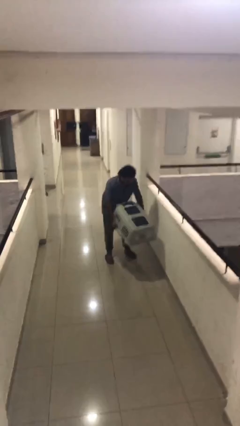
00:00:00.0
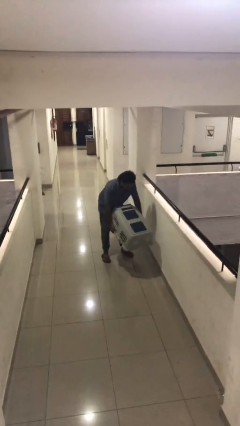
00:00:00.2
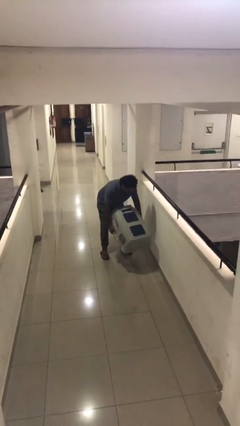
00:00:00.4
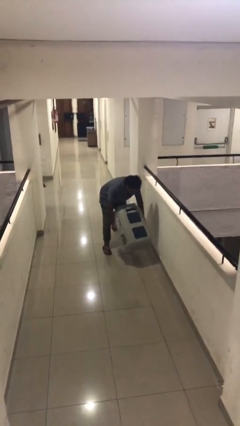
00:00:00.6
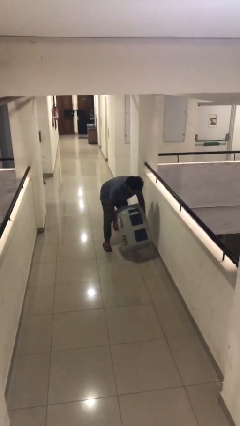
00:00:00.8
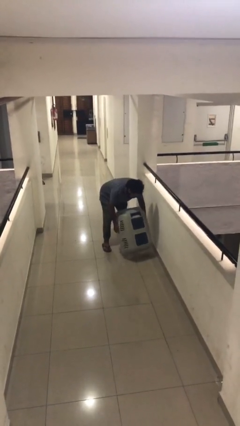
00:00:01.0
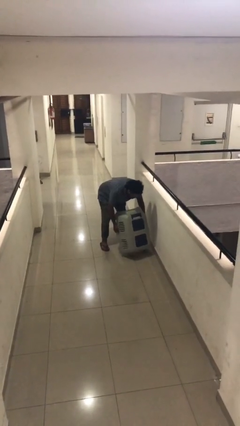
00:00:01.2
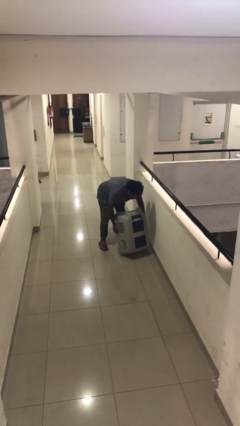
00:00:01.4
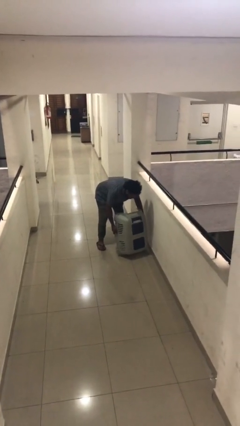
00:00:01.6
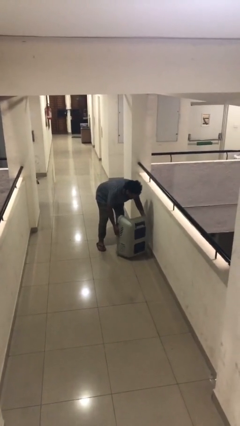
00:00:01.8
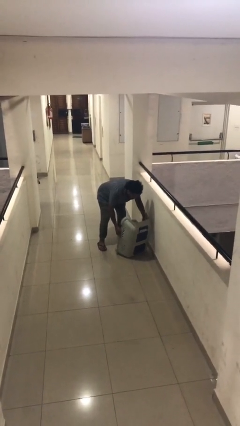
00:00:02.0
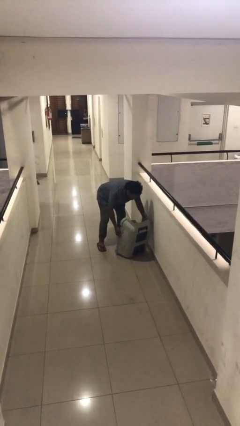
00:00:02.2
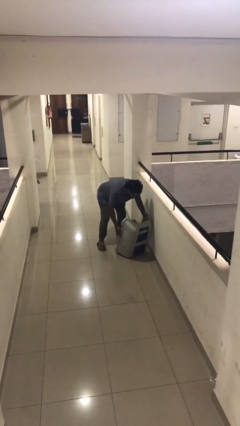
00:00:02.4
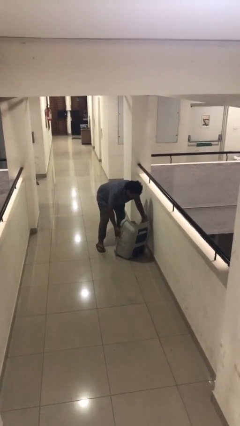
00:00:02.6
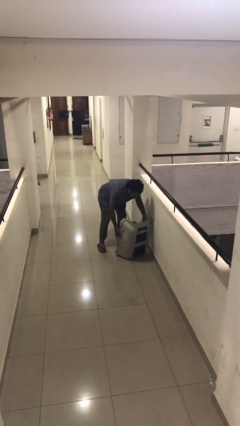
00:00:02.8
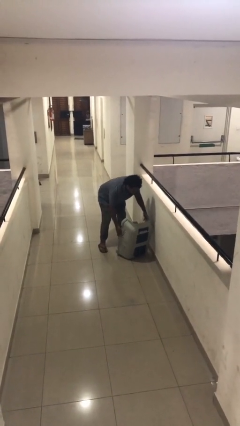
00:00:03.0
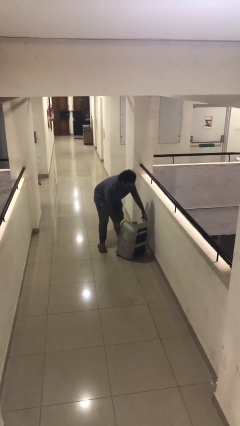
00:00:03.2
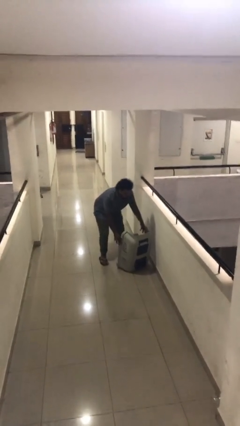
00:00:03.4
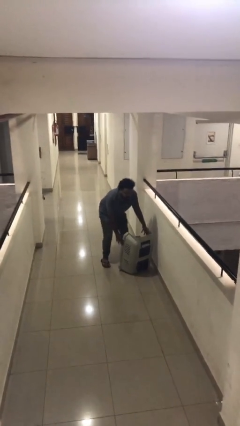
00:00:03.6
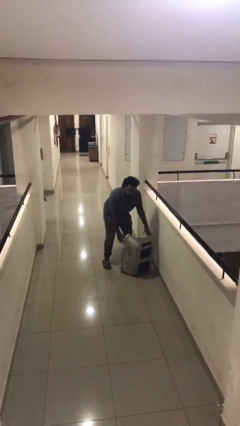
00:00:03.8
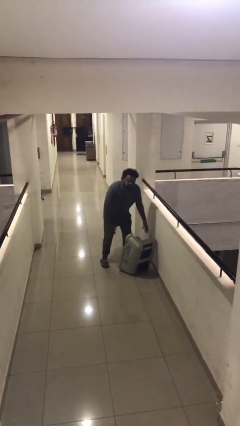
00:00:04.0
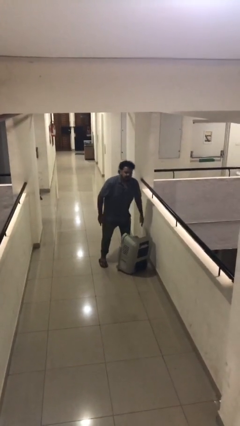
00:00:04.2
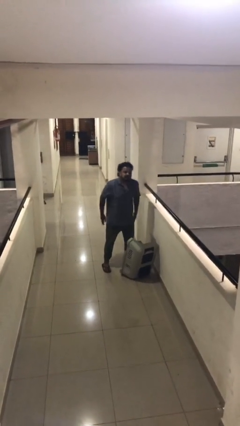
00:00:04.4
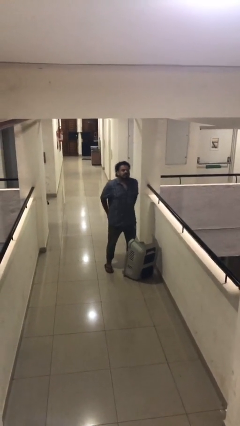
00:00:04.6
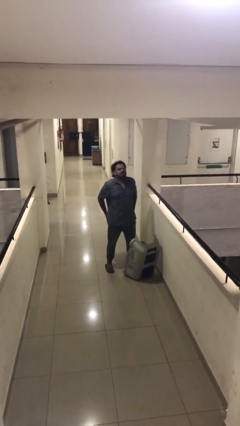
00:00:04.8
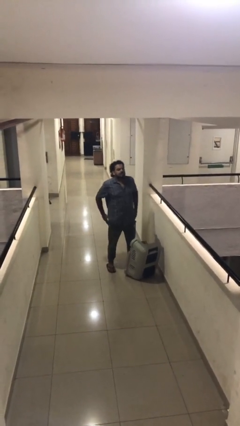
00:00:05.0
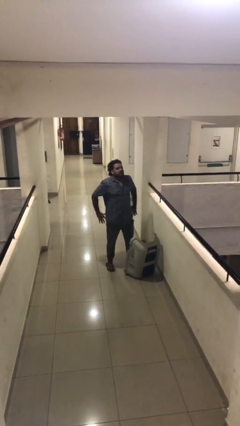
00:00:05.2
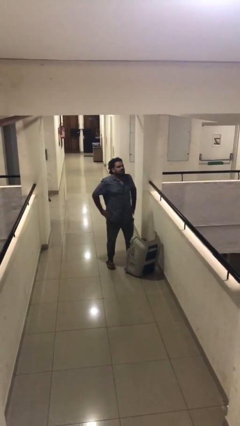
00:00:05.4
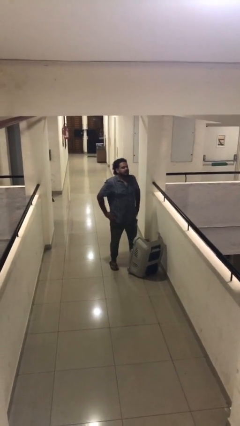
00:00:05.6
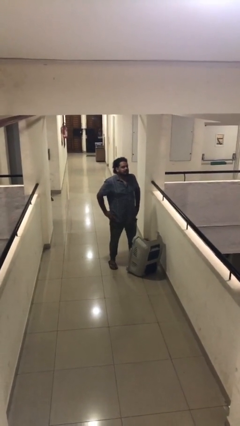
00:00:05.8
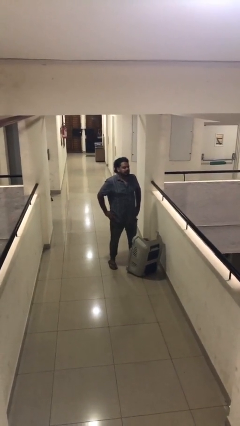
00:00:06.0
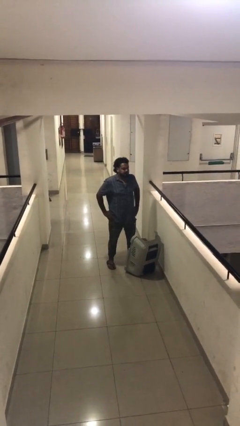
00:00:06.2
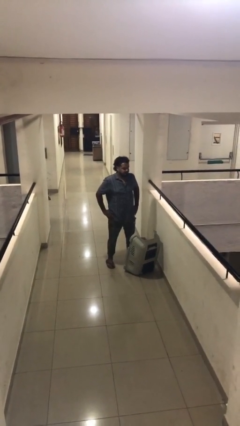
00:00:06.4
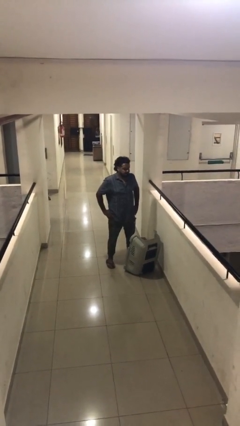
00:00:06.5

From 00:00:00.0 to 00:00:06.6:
person puts down object on floor

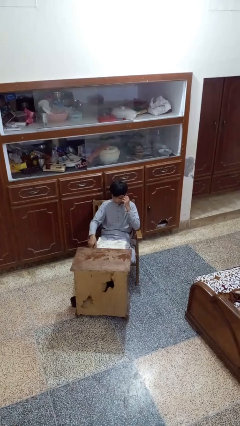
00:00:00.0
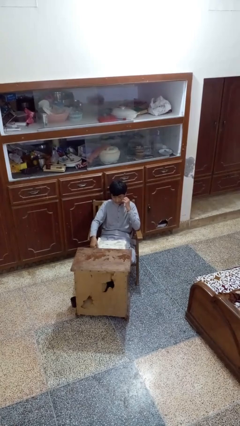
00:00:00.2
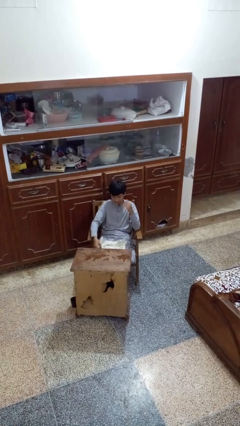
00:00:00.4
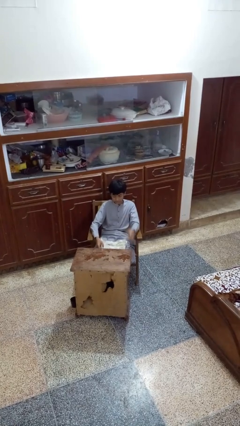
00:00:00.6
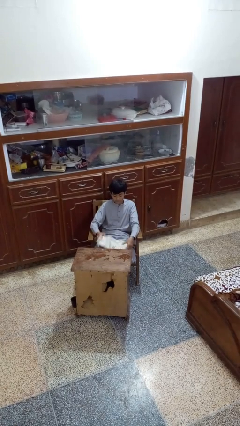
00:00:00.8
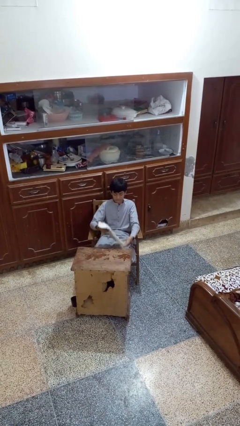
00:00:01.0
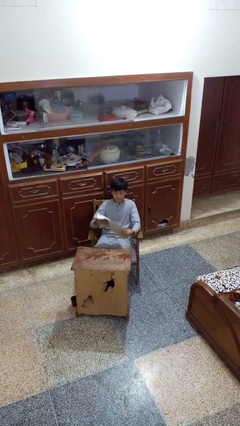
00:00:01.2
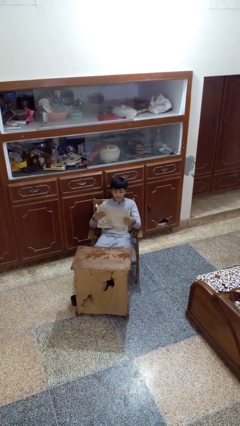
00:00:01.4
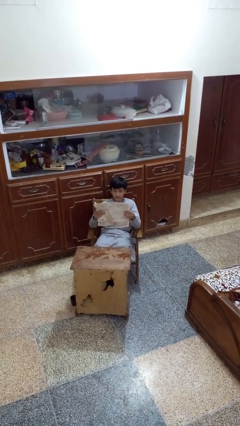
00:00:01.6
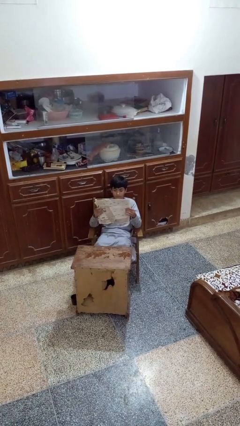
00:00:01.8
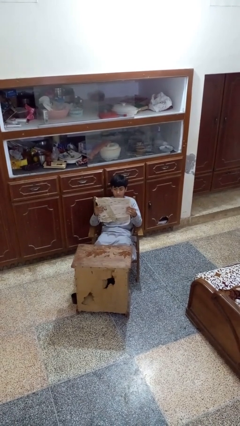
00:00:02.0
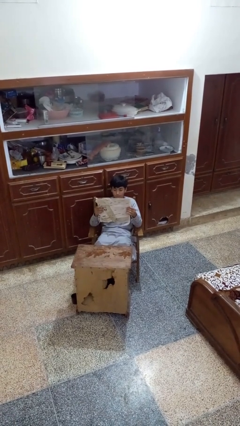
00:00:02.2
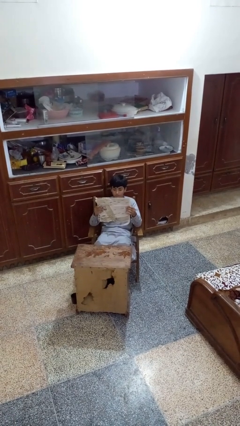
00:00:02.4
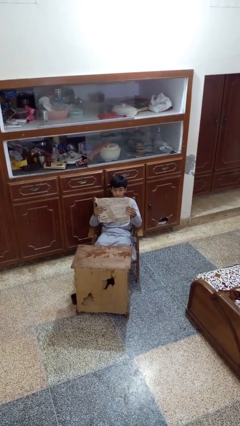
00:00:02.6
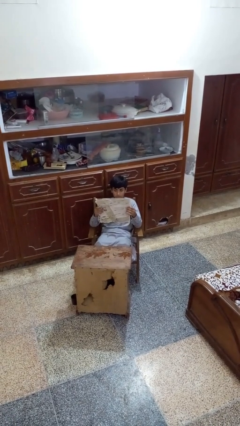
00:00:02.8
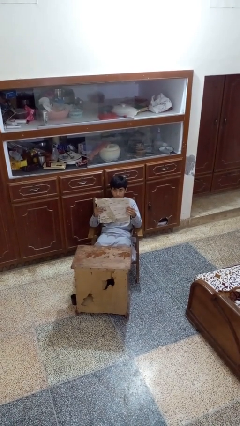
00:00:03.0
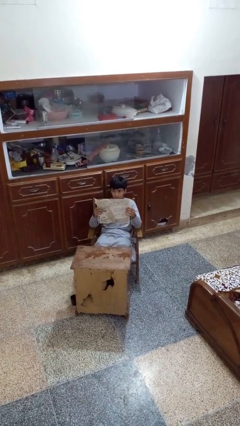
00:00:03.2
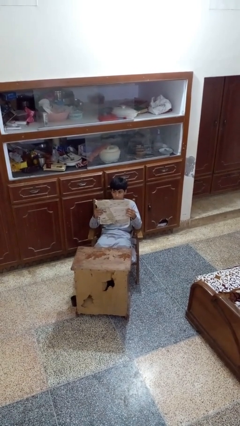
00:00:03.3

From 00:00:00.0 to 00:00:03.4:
person reads newspaper

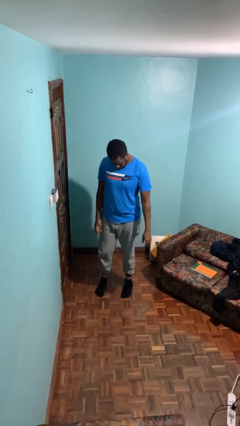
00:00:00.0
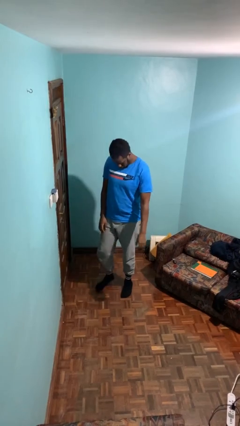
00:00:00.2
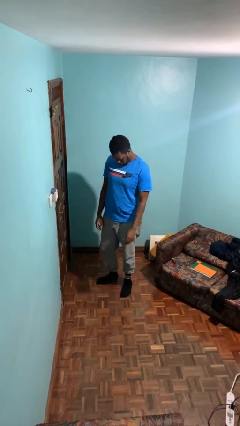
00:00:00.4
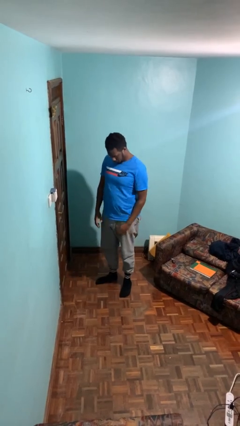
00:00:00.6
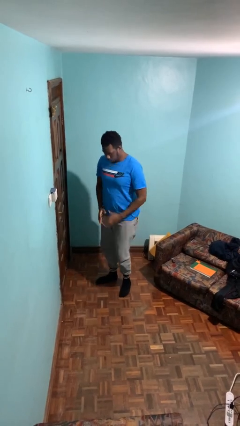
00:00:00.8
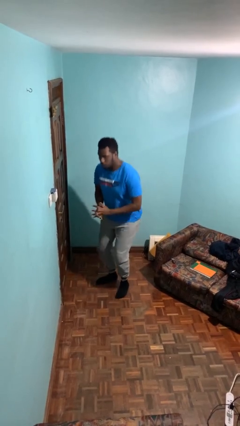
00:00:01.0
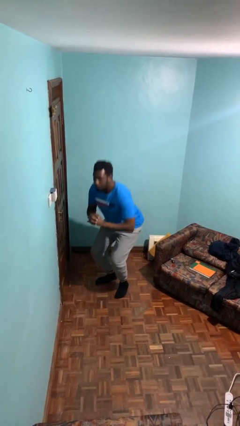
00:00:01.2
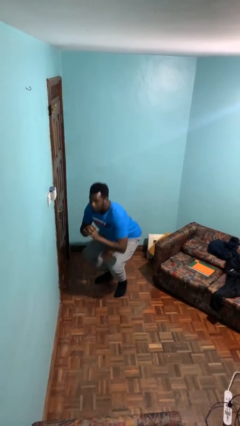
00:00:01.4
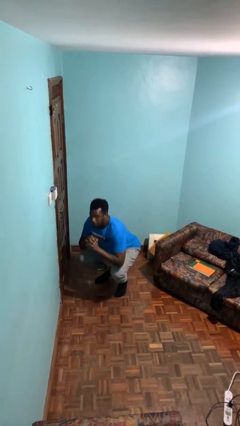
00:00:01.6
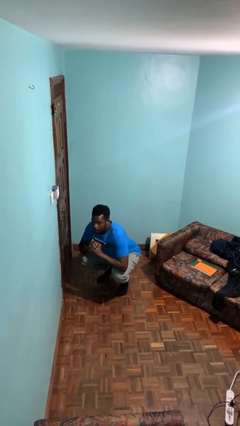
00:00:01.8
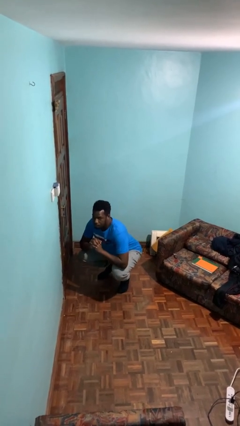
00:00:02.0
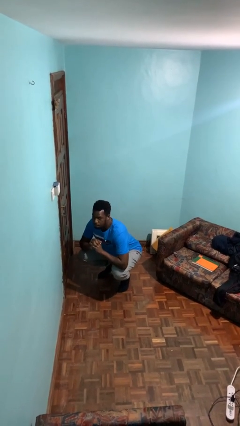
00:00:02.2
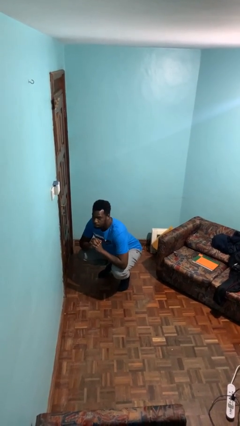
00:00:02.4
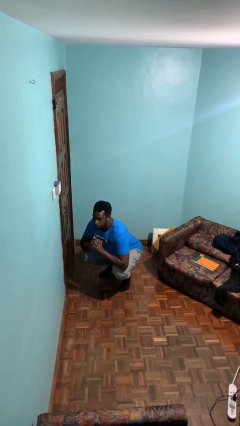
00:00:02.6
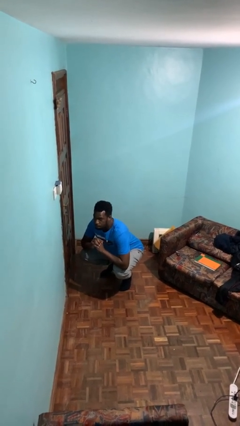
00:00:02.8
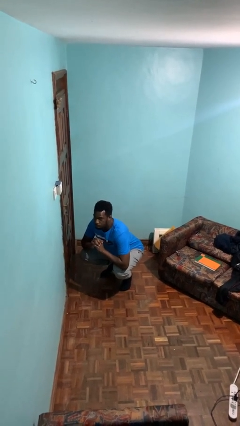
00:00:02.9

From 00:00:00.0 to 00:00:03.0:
person squats

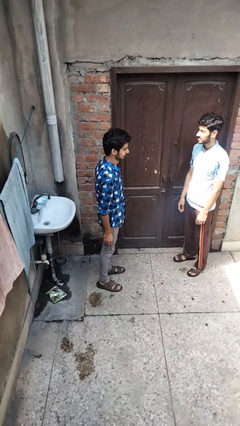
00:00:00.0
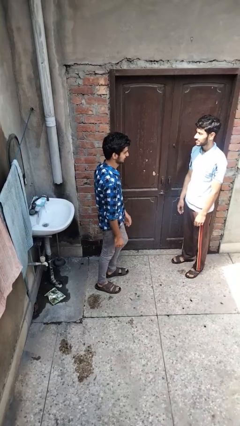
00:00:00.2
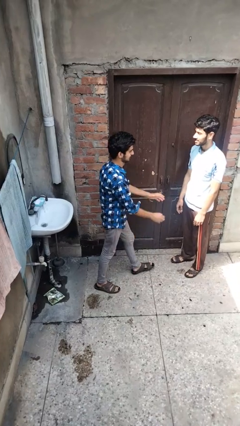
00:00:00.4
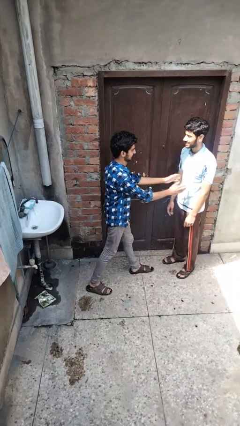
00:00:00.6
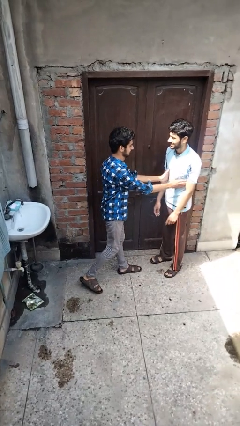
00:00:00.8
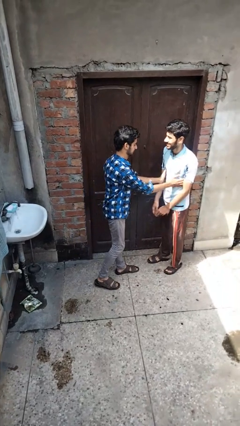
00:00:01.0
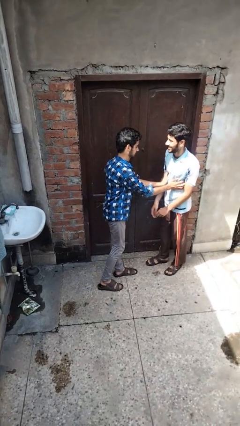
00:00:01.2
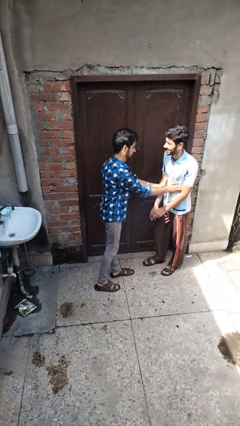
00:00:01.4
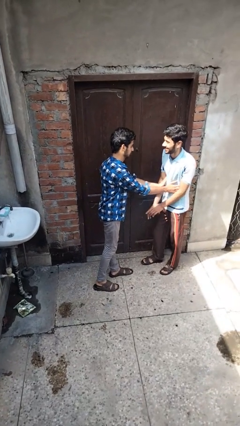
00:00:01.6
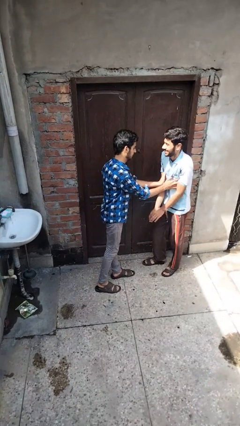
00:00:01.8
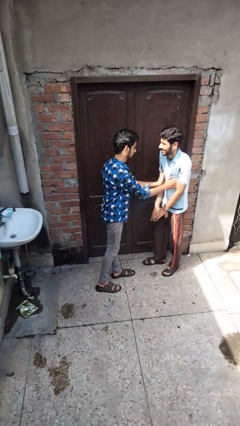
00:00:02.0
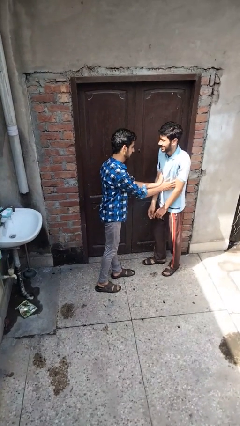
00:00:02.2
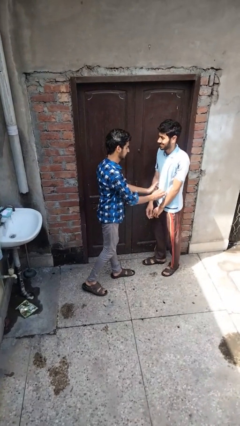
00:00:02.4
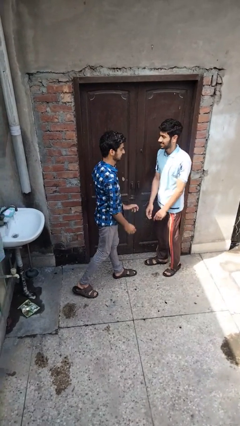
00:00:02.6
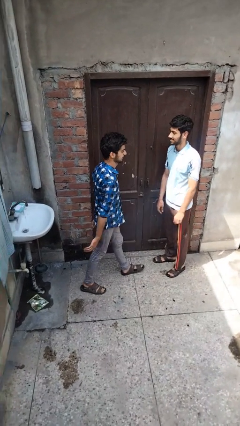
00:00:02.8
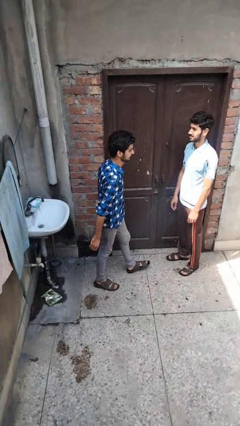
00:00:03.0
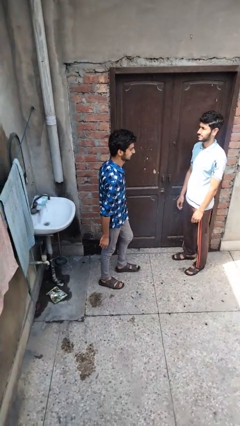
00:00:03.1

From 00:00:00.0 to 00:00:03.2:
person tickles person

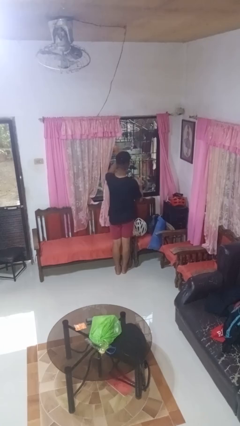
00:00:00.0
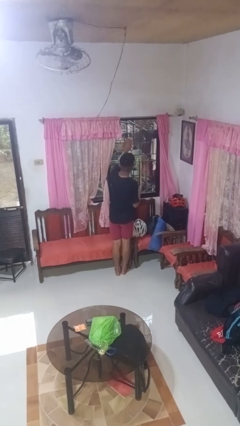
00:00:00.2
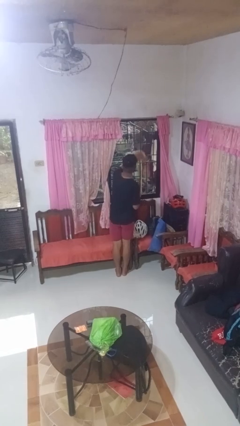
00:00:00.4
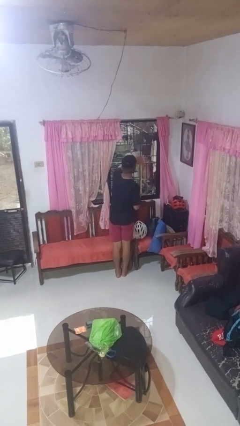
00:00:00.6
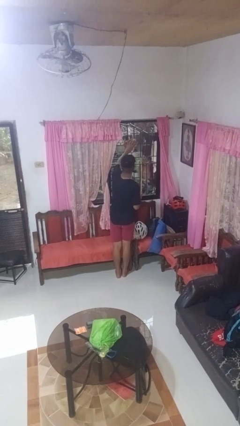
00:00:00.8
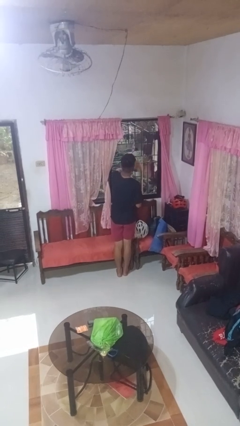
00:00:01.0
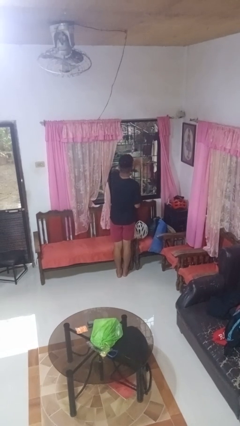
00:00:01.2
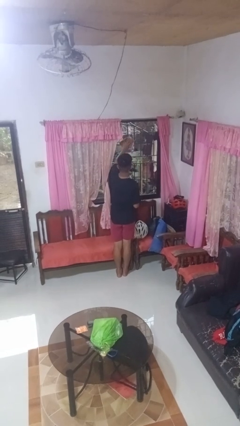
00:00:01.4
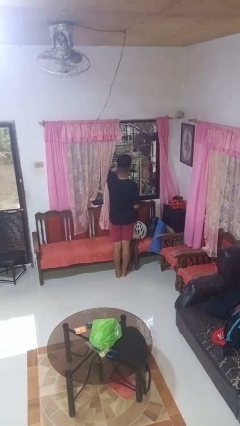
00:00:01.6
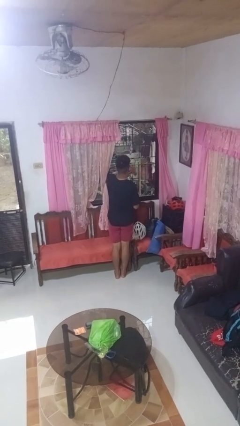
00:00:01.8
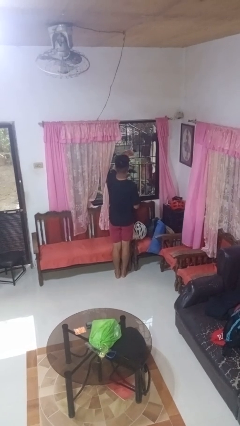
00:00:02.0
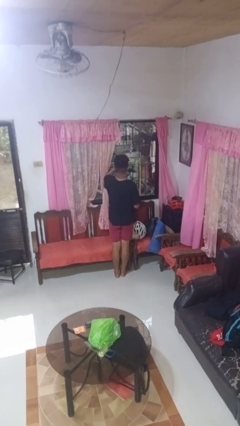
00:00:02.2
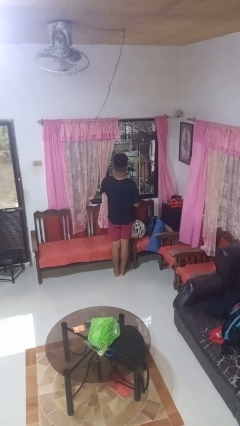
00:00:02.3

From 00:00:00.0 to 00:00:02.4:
person washes window
